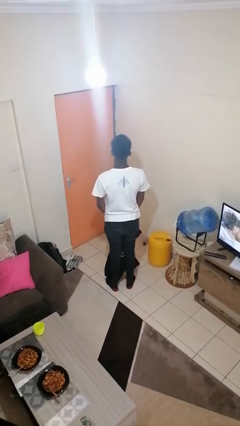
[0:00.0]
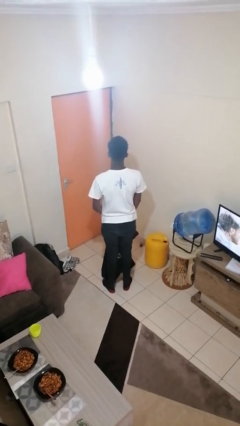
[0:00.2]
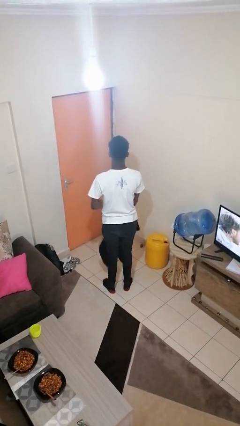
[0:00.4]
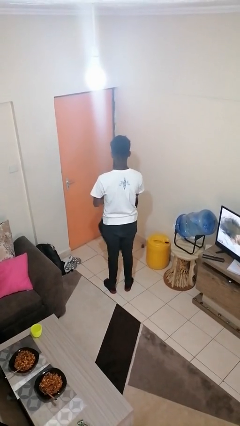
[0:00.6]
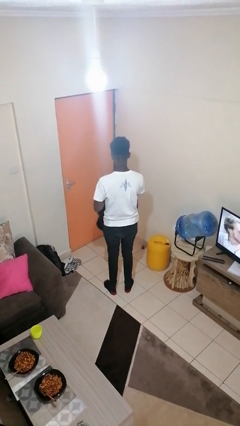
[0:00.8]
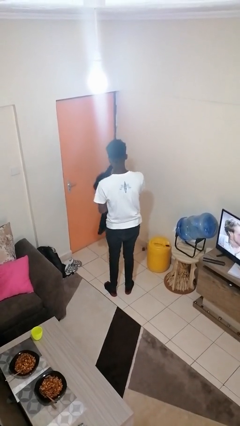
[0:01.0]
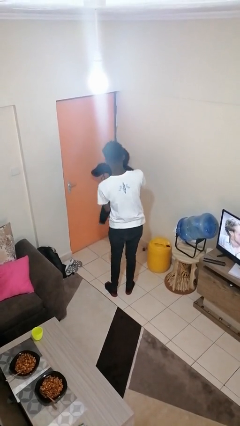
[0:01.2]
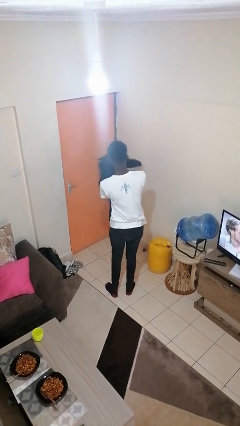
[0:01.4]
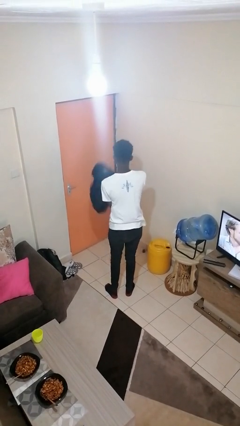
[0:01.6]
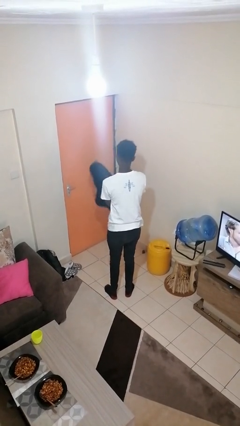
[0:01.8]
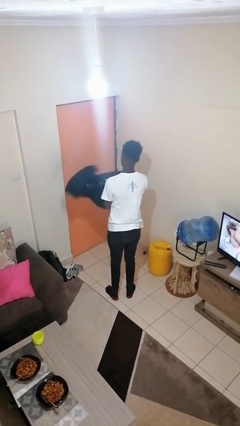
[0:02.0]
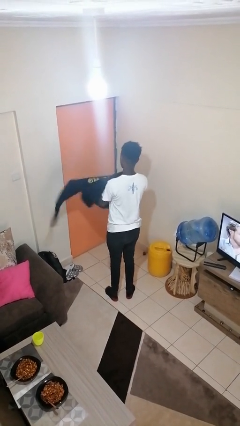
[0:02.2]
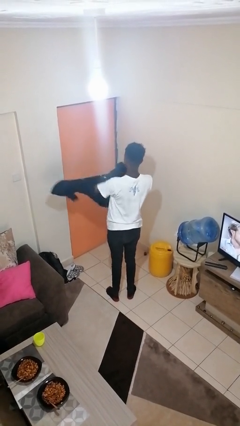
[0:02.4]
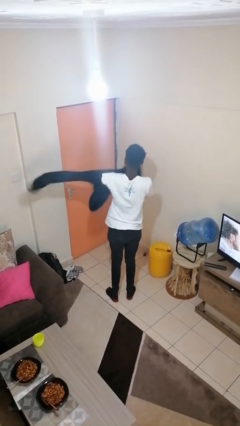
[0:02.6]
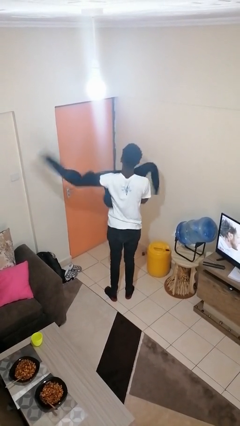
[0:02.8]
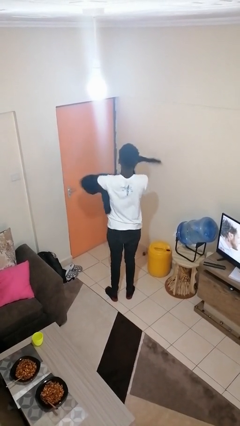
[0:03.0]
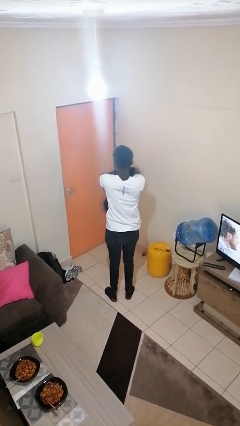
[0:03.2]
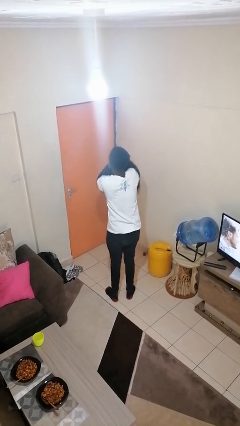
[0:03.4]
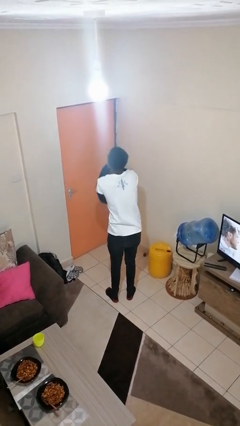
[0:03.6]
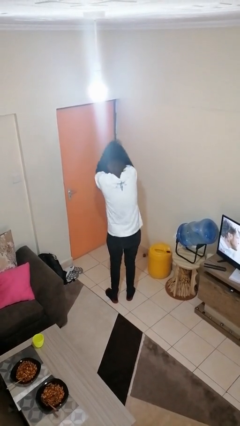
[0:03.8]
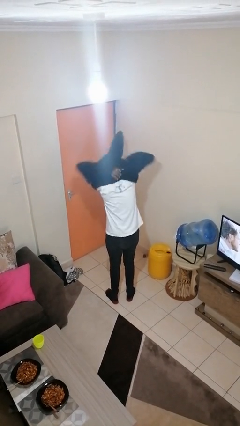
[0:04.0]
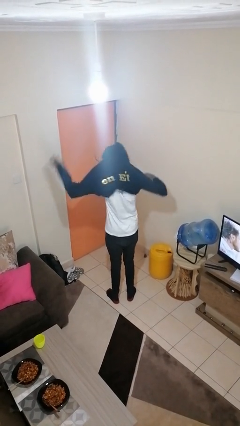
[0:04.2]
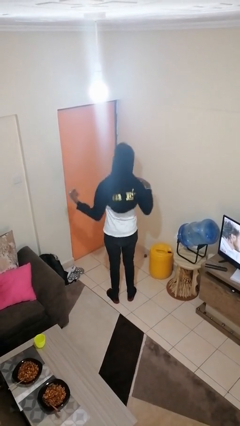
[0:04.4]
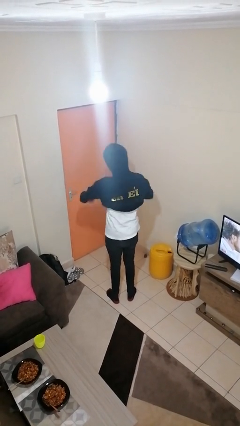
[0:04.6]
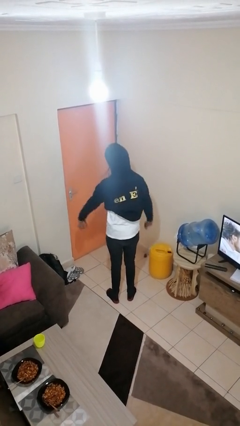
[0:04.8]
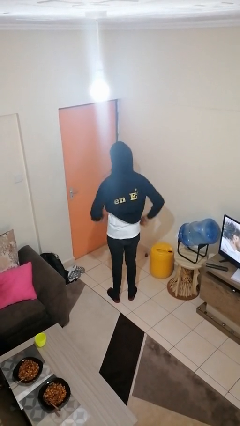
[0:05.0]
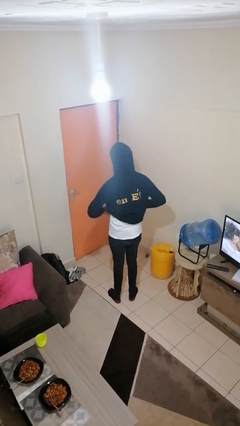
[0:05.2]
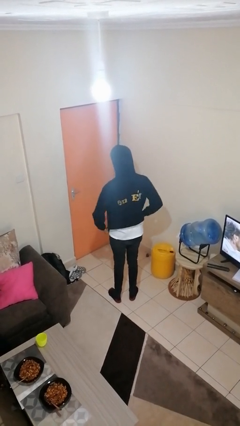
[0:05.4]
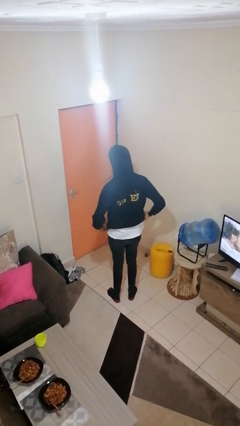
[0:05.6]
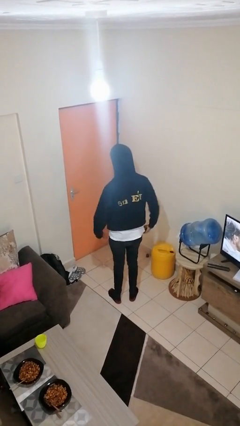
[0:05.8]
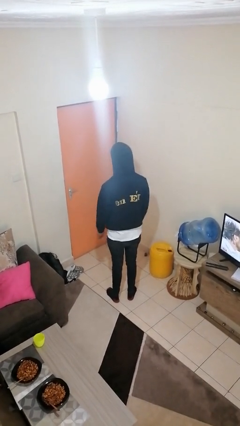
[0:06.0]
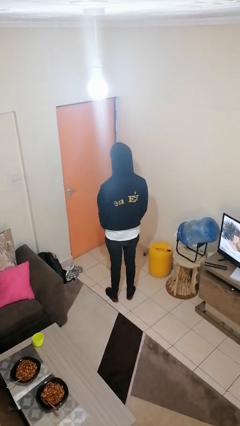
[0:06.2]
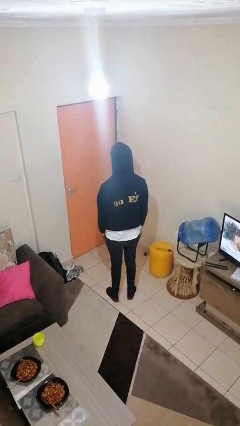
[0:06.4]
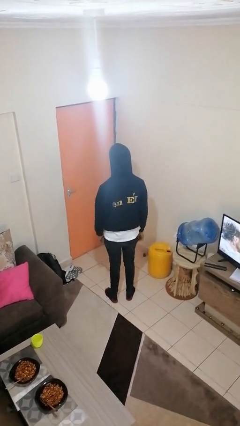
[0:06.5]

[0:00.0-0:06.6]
person puts on hoodie

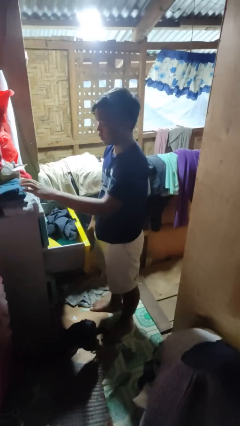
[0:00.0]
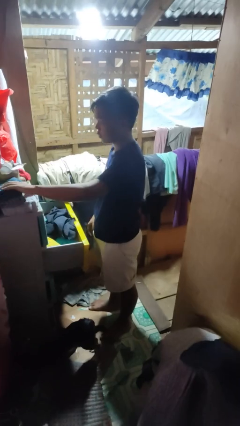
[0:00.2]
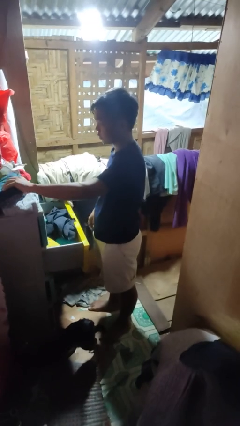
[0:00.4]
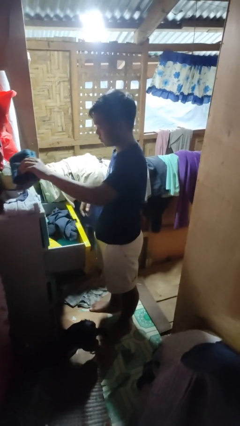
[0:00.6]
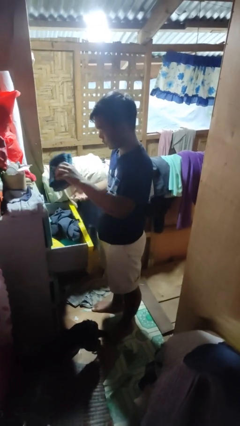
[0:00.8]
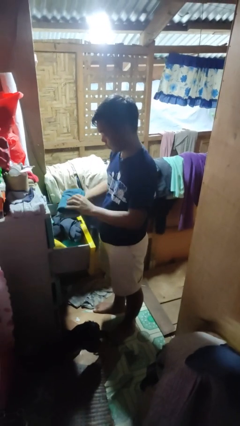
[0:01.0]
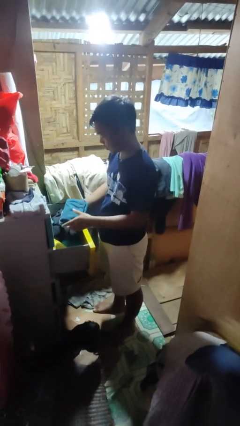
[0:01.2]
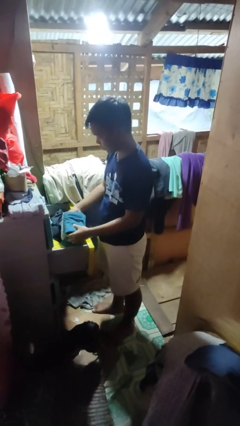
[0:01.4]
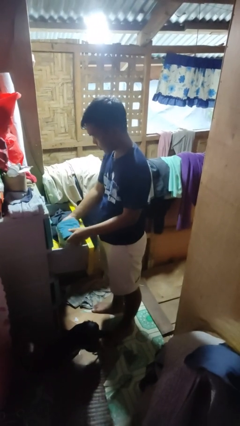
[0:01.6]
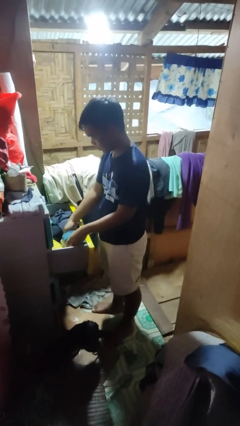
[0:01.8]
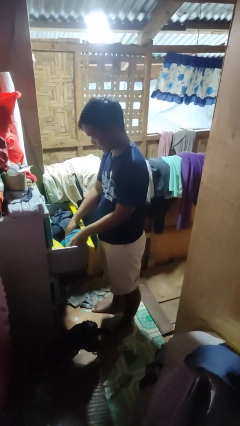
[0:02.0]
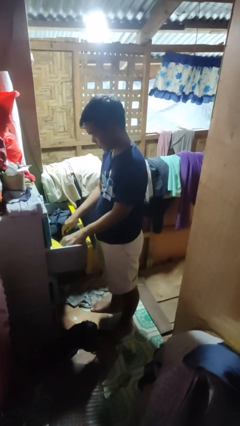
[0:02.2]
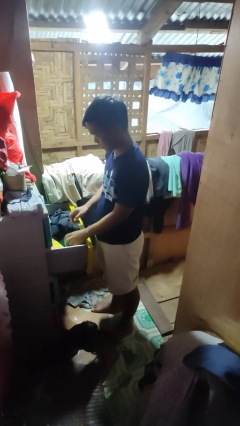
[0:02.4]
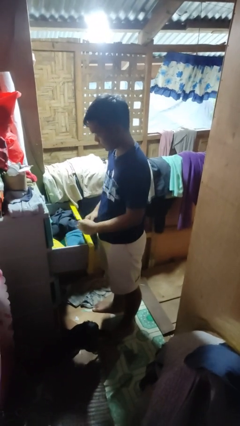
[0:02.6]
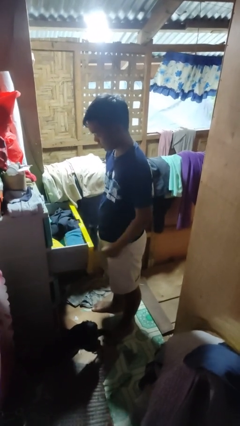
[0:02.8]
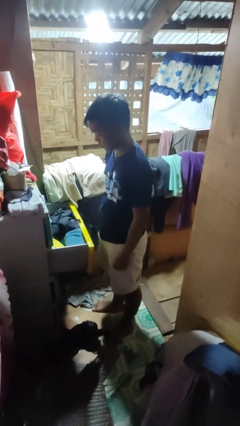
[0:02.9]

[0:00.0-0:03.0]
person puts clothes into dresser

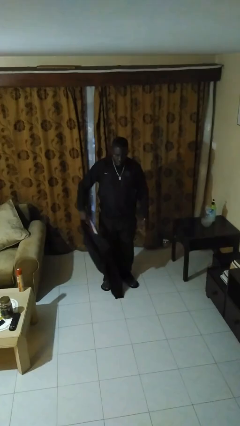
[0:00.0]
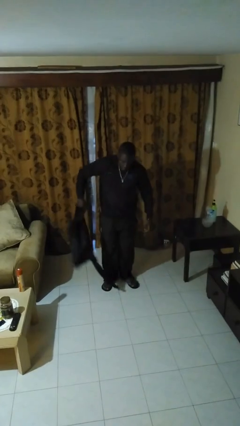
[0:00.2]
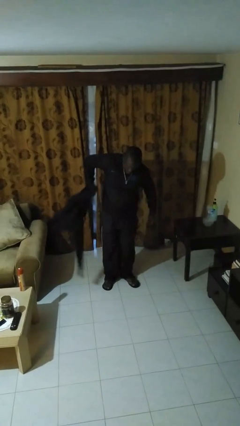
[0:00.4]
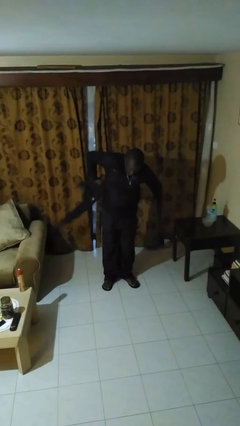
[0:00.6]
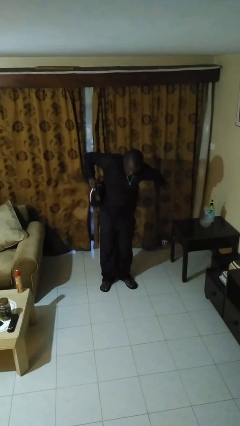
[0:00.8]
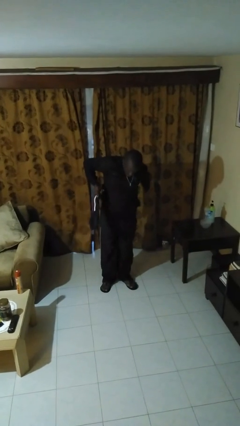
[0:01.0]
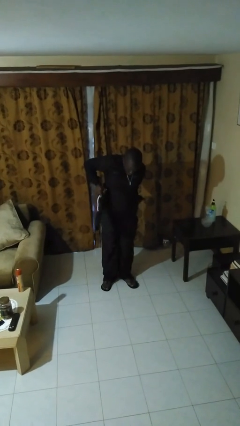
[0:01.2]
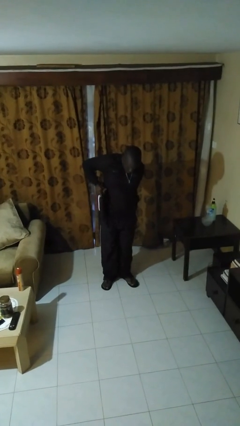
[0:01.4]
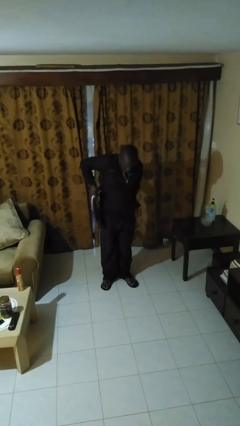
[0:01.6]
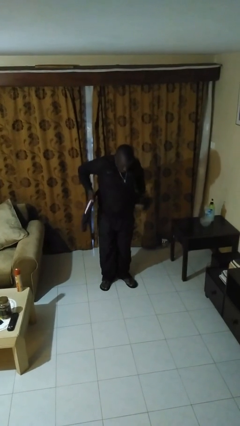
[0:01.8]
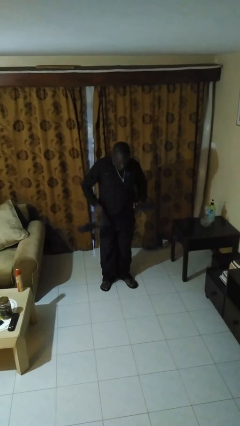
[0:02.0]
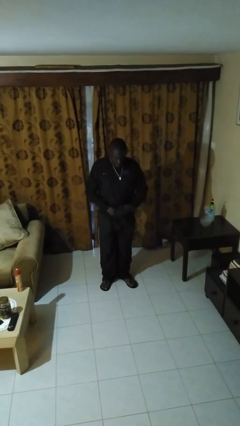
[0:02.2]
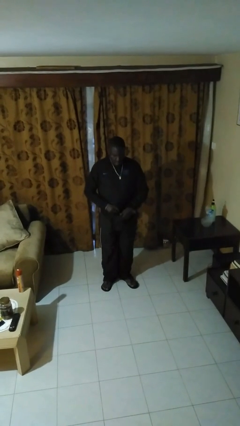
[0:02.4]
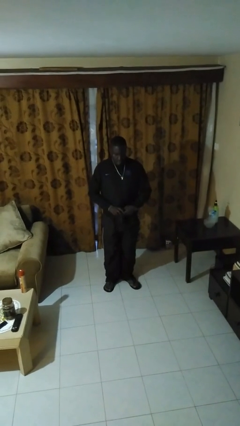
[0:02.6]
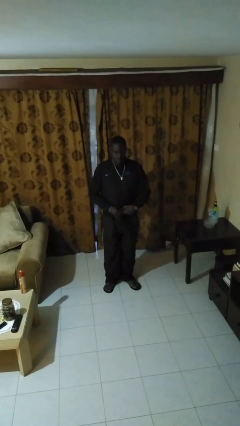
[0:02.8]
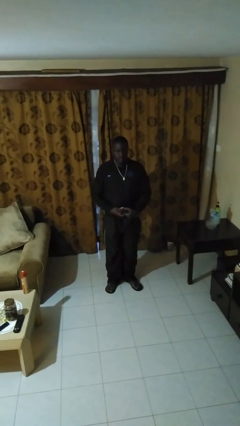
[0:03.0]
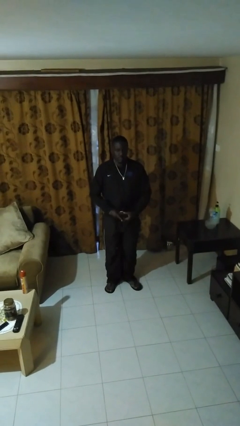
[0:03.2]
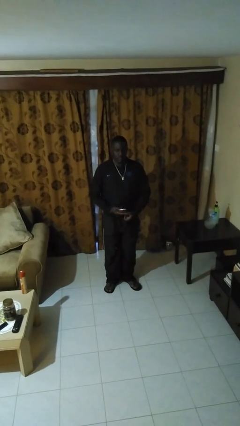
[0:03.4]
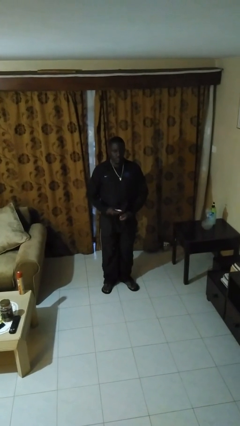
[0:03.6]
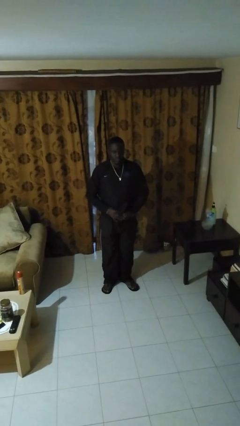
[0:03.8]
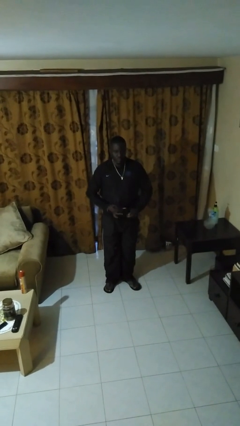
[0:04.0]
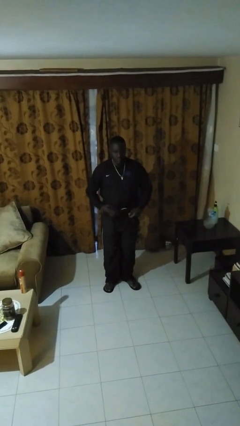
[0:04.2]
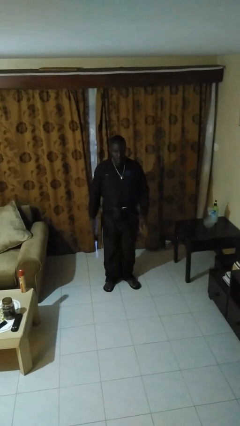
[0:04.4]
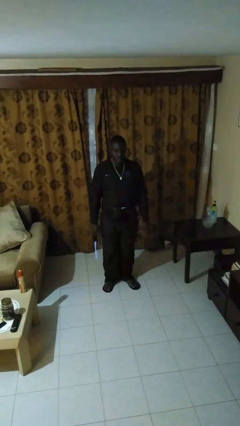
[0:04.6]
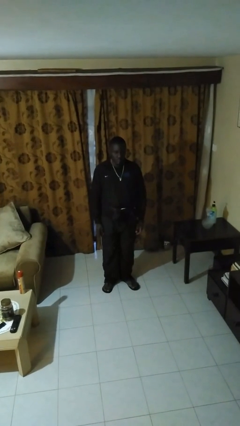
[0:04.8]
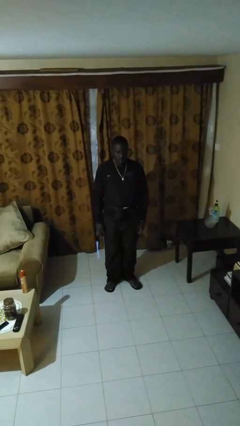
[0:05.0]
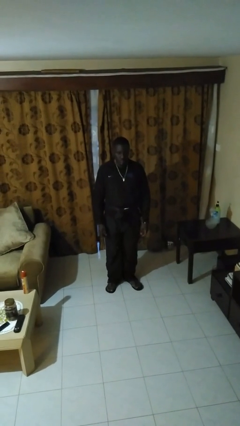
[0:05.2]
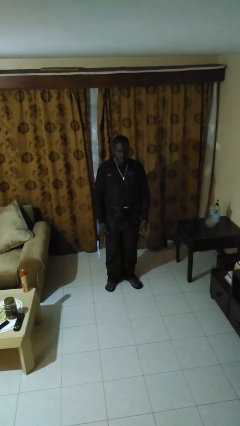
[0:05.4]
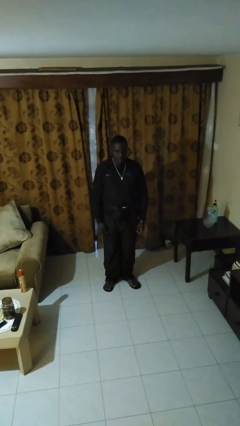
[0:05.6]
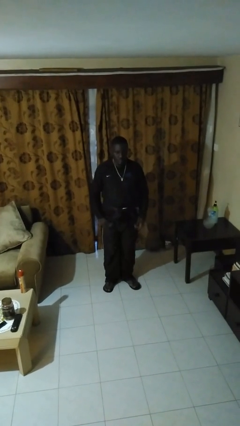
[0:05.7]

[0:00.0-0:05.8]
person ties jacket around waist

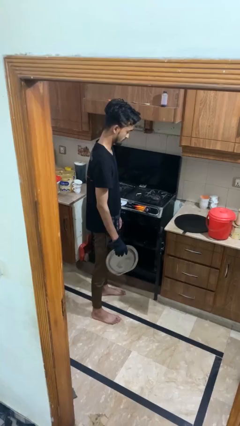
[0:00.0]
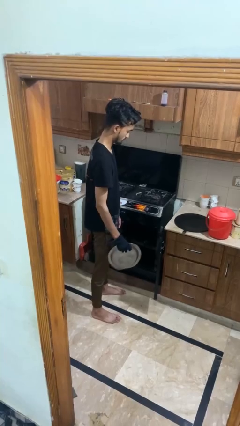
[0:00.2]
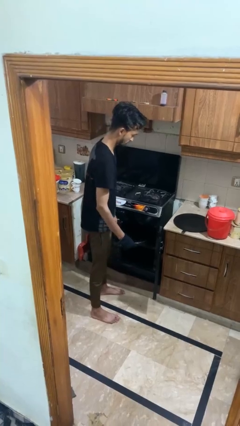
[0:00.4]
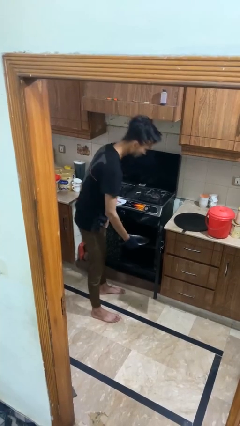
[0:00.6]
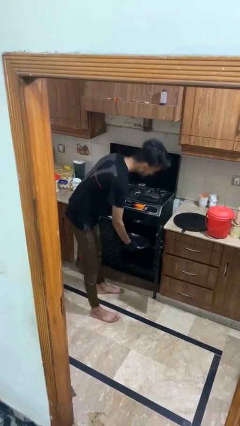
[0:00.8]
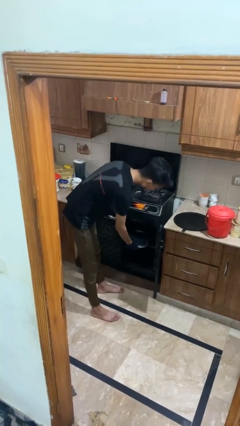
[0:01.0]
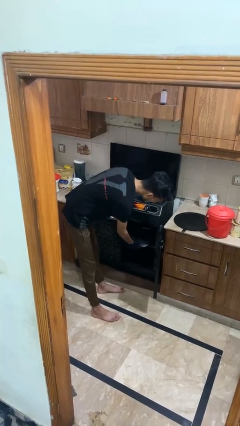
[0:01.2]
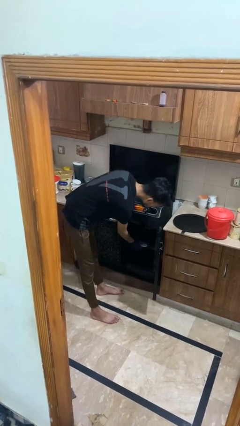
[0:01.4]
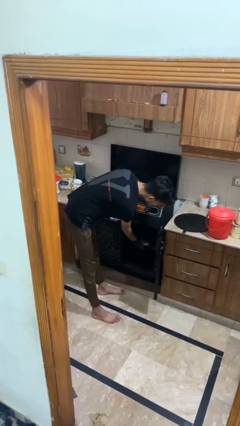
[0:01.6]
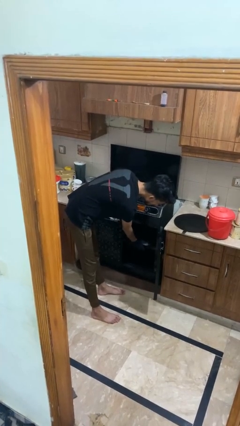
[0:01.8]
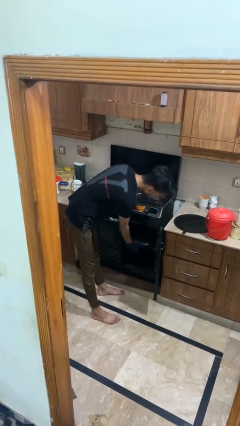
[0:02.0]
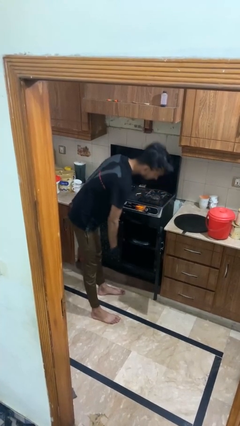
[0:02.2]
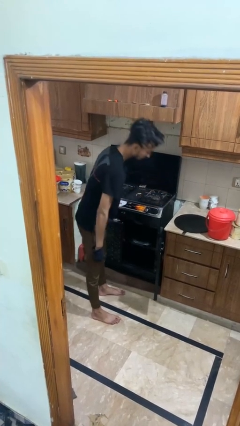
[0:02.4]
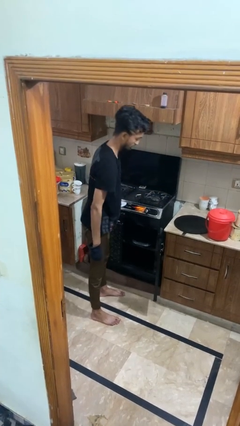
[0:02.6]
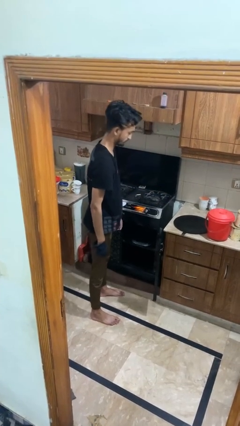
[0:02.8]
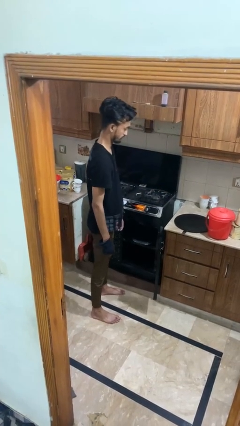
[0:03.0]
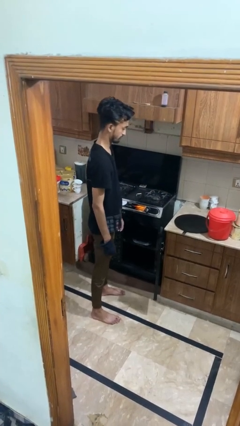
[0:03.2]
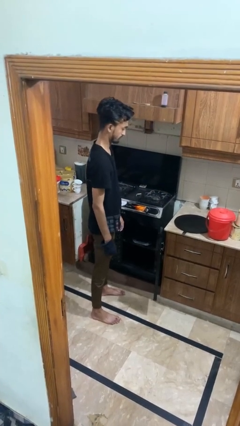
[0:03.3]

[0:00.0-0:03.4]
person puts object into oven
